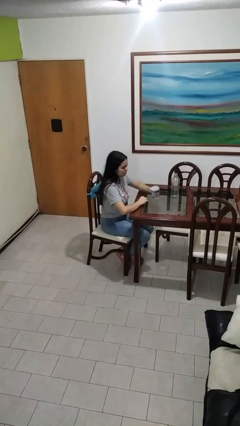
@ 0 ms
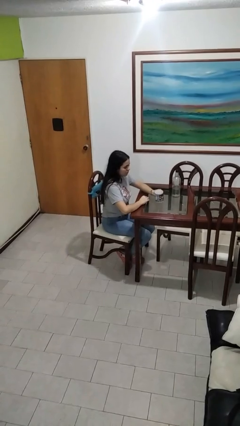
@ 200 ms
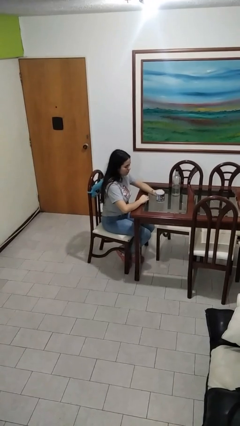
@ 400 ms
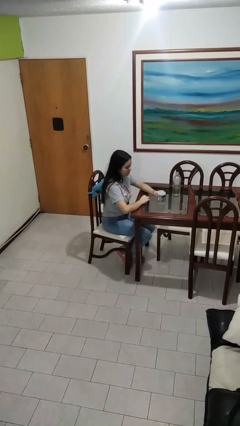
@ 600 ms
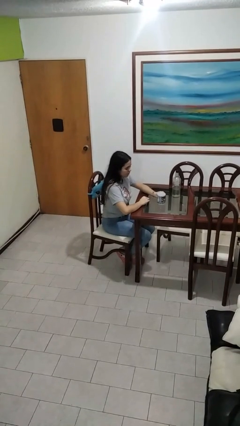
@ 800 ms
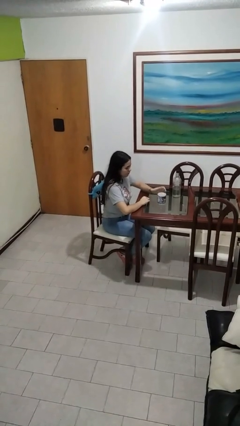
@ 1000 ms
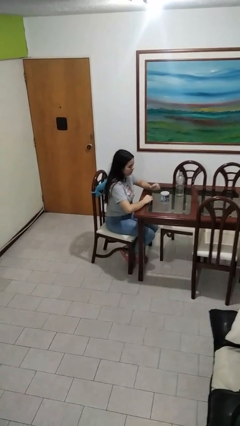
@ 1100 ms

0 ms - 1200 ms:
person puts down object on table

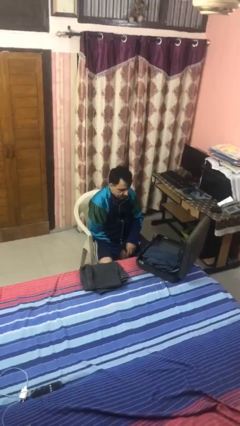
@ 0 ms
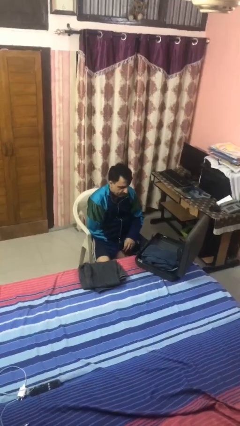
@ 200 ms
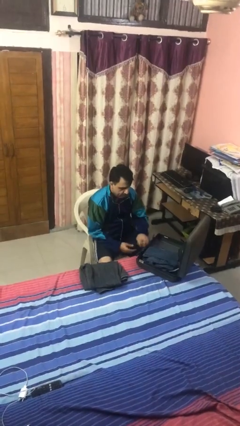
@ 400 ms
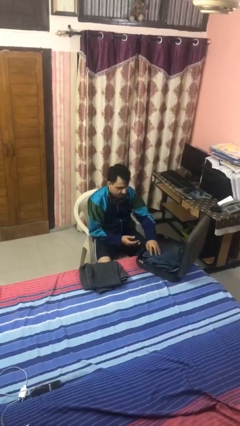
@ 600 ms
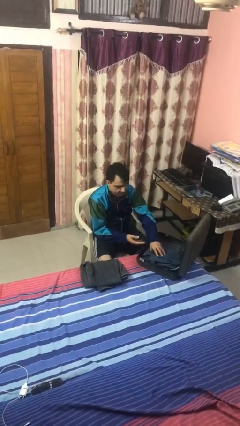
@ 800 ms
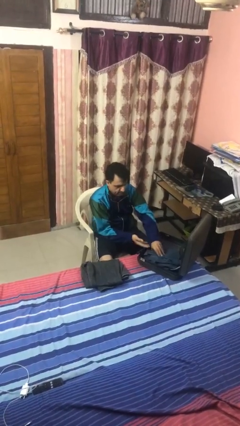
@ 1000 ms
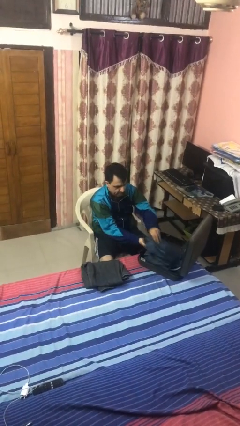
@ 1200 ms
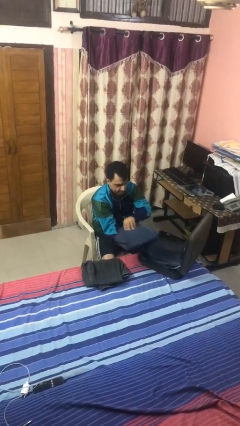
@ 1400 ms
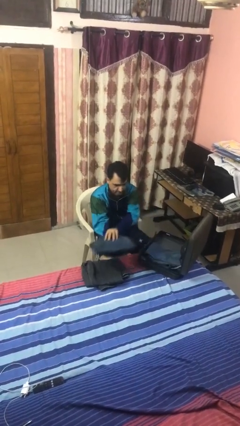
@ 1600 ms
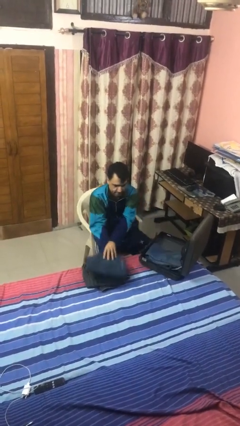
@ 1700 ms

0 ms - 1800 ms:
person unloads clothes from suitcase

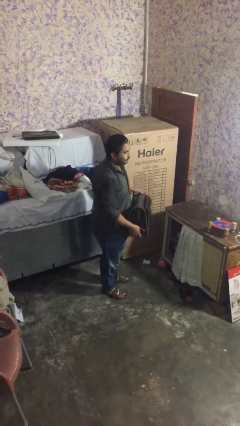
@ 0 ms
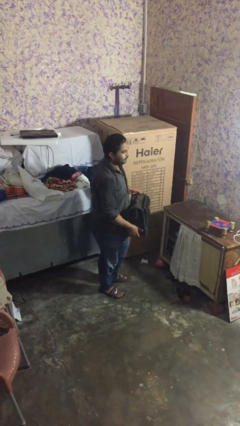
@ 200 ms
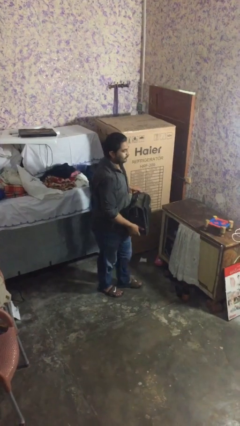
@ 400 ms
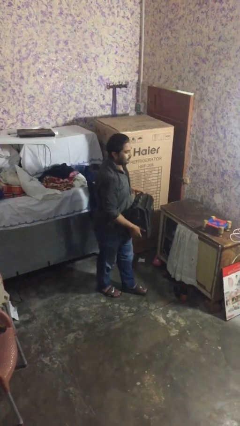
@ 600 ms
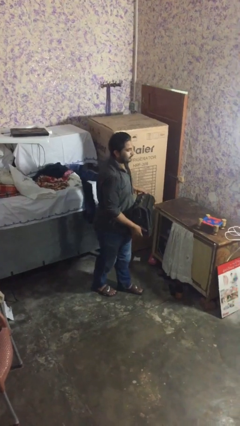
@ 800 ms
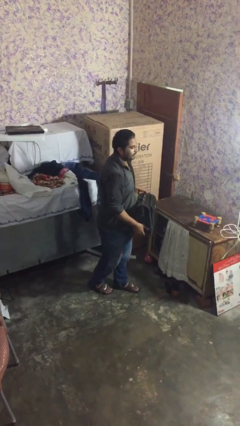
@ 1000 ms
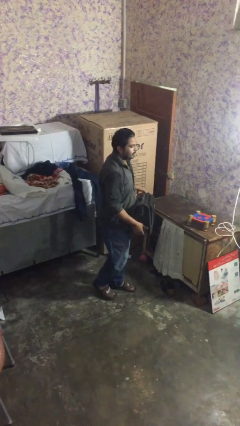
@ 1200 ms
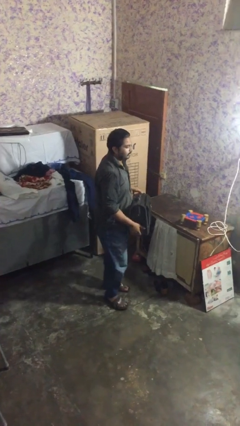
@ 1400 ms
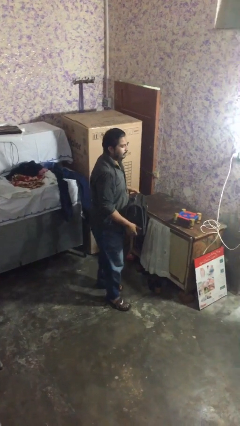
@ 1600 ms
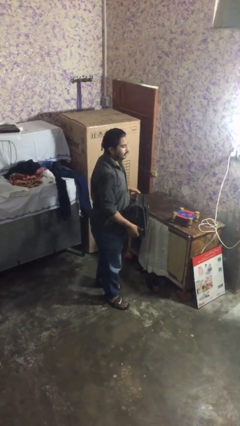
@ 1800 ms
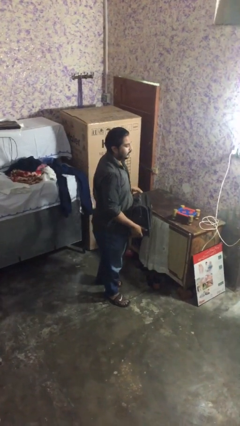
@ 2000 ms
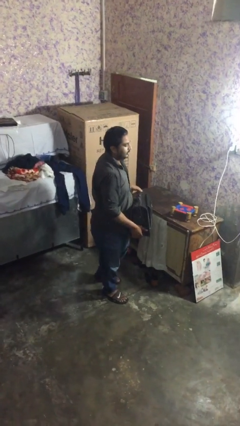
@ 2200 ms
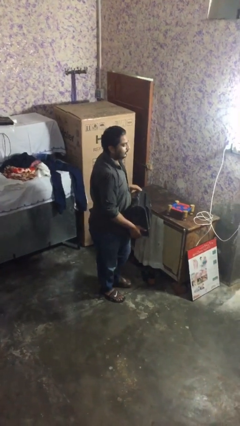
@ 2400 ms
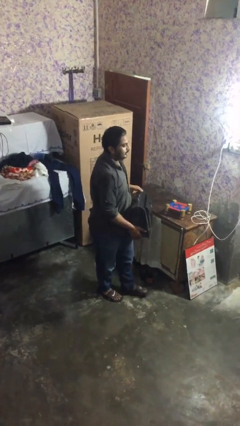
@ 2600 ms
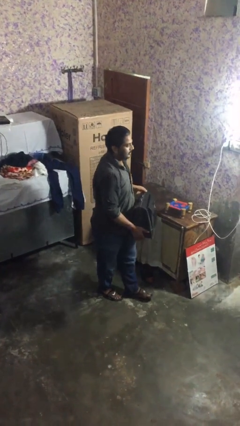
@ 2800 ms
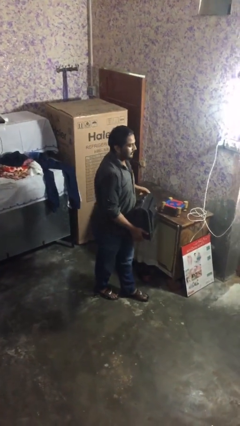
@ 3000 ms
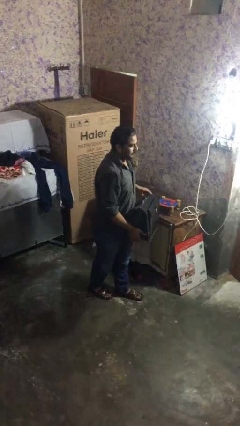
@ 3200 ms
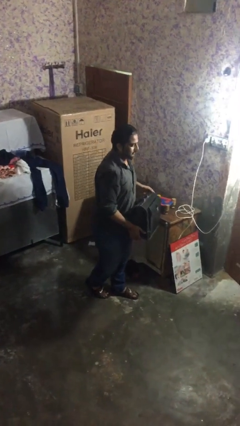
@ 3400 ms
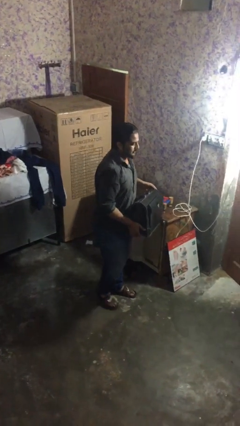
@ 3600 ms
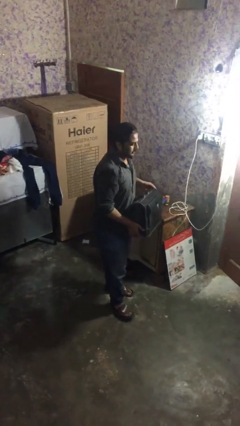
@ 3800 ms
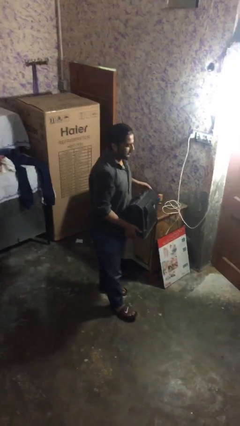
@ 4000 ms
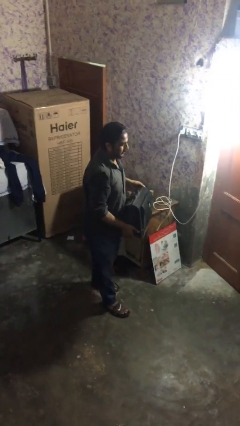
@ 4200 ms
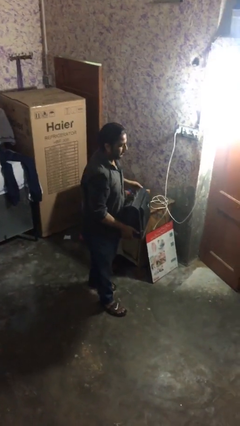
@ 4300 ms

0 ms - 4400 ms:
person carries heavy object

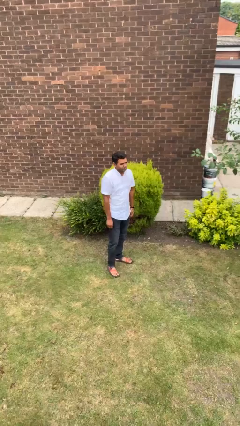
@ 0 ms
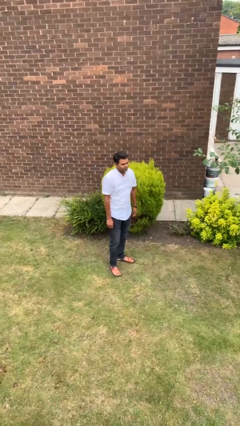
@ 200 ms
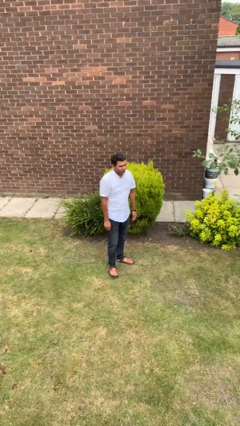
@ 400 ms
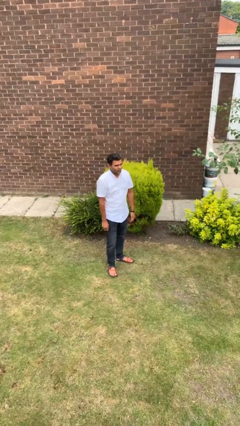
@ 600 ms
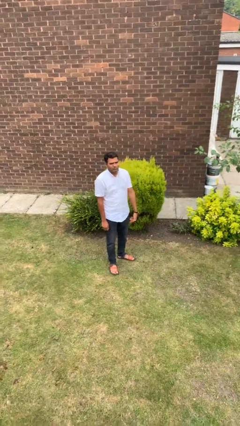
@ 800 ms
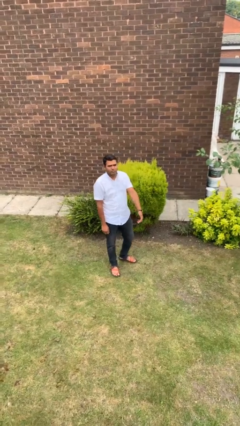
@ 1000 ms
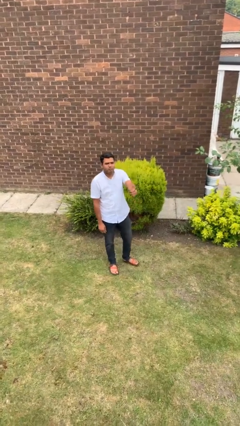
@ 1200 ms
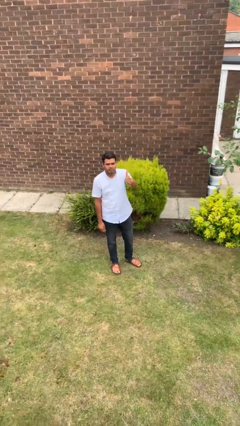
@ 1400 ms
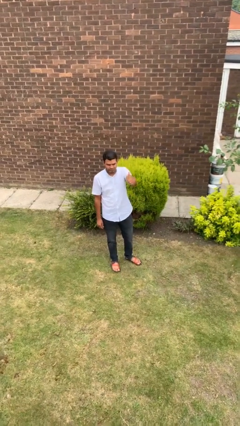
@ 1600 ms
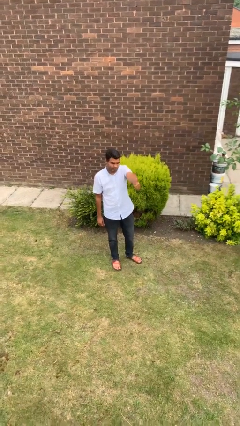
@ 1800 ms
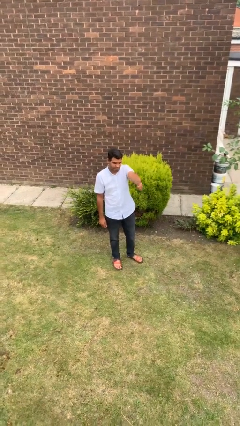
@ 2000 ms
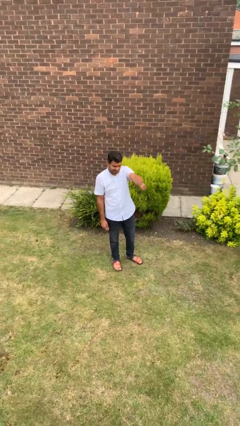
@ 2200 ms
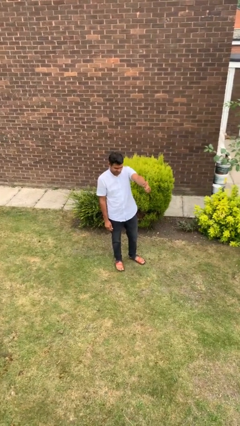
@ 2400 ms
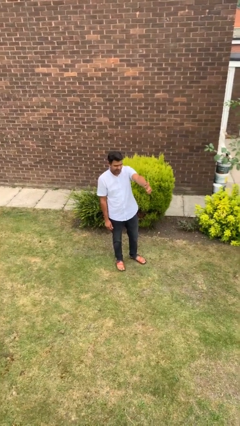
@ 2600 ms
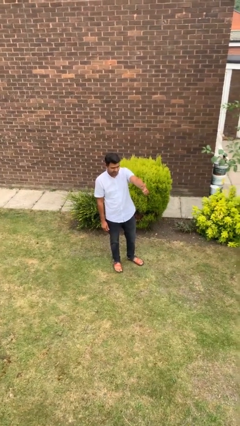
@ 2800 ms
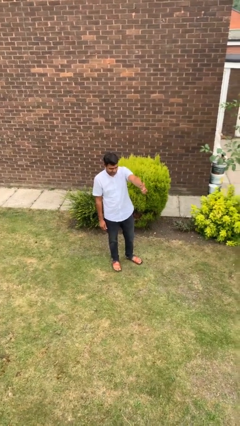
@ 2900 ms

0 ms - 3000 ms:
person gestures thumbs up

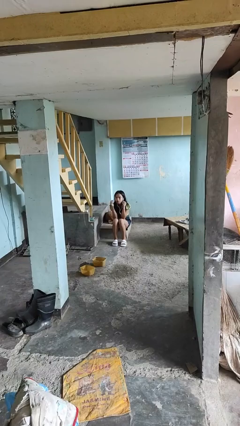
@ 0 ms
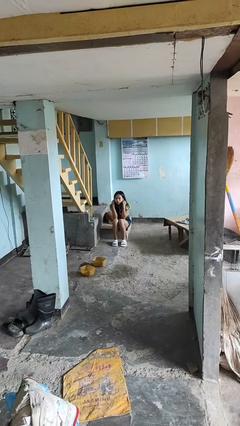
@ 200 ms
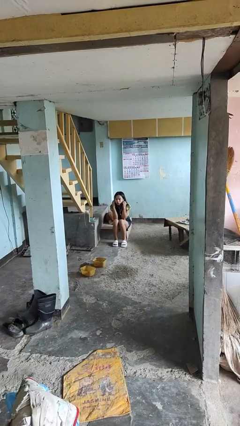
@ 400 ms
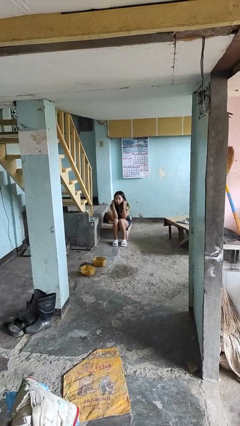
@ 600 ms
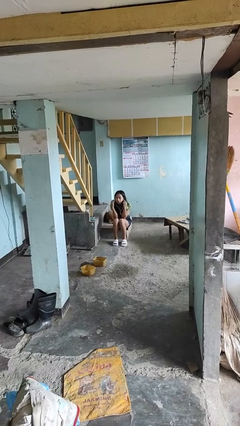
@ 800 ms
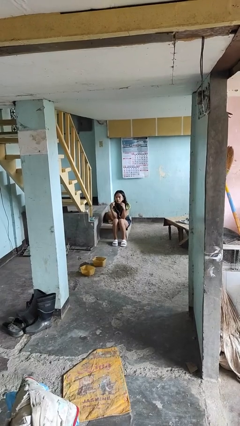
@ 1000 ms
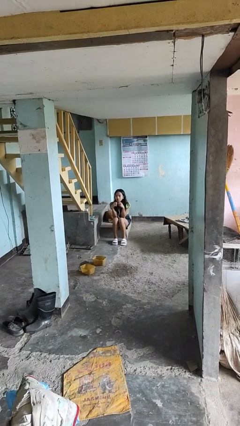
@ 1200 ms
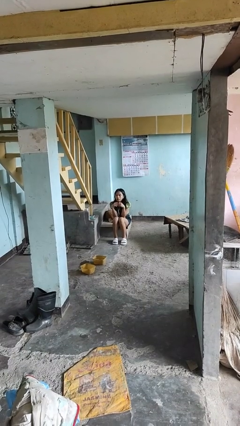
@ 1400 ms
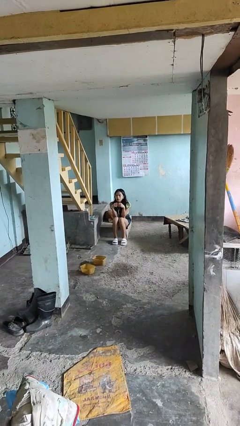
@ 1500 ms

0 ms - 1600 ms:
person takes off headphones

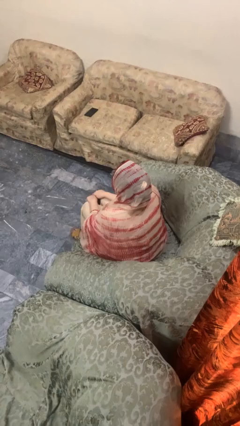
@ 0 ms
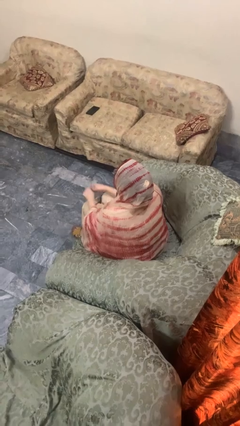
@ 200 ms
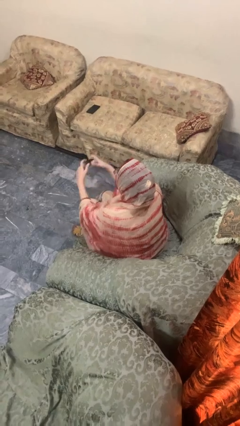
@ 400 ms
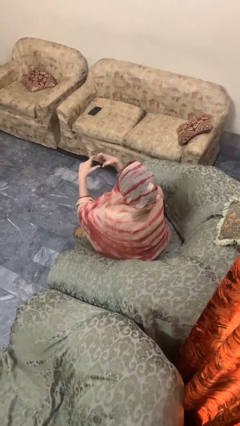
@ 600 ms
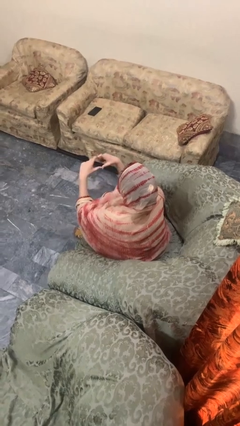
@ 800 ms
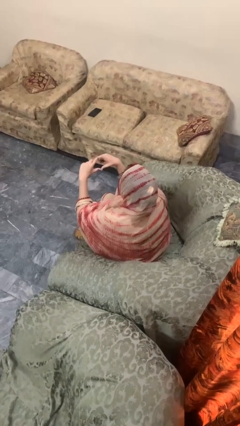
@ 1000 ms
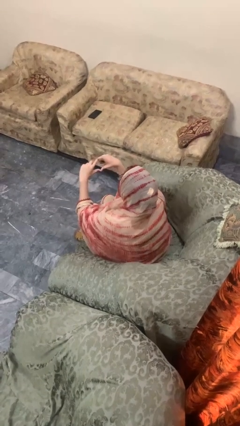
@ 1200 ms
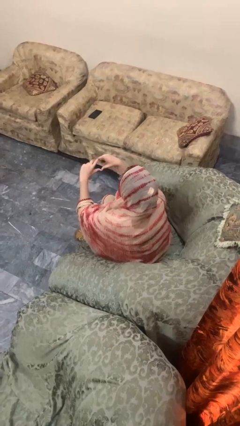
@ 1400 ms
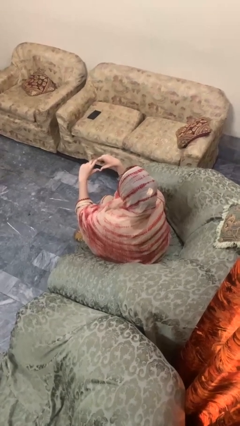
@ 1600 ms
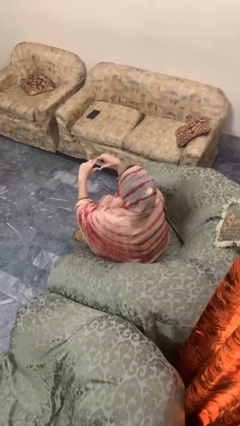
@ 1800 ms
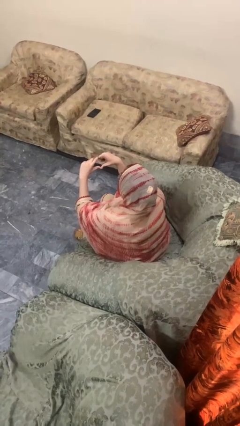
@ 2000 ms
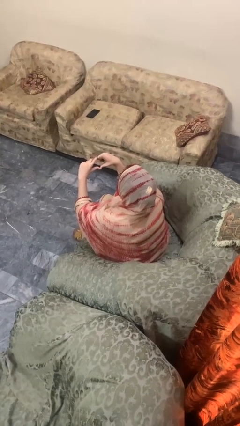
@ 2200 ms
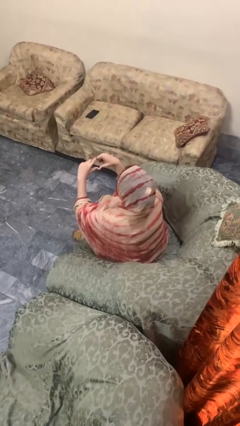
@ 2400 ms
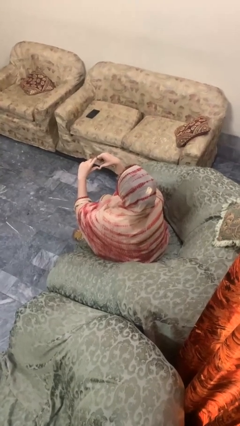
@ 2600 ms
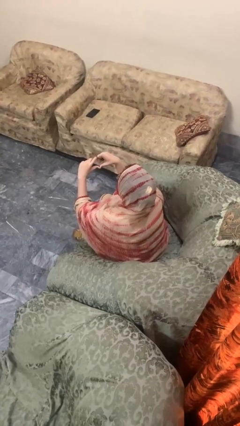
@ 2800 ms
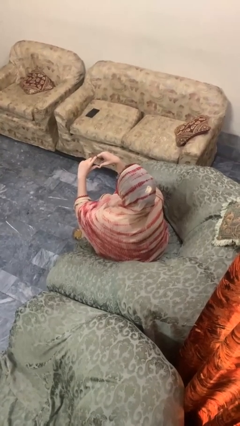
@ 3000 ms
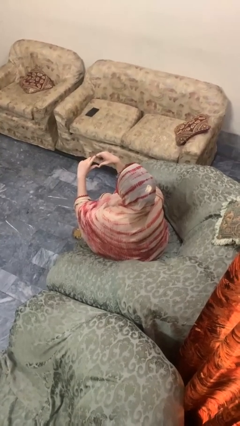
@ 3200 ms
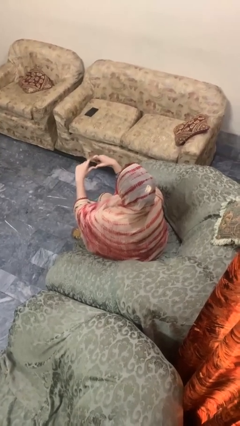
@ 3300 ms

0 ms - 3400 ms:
person gestures heart

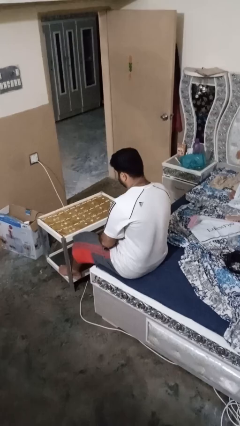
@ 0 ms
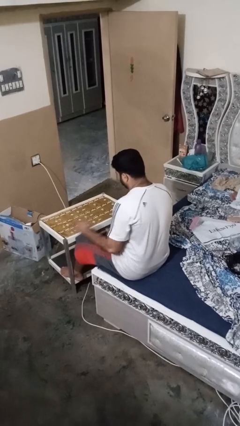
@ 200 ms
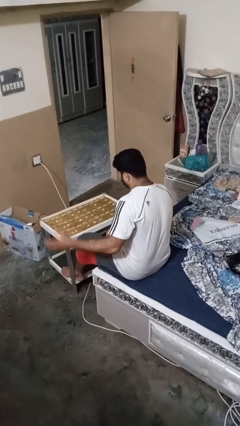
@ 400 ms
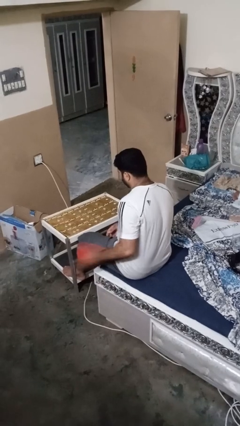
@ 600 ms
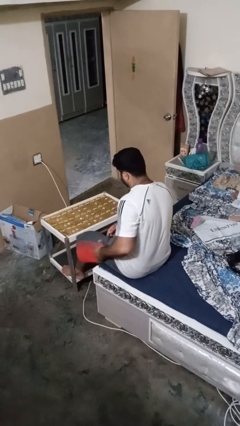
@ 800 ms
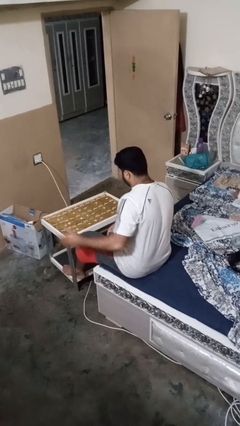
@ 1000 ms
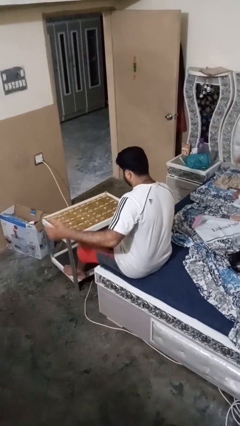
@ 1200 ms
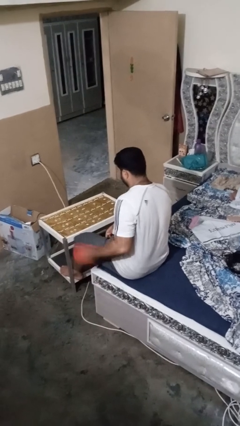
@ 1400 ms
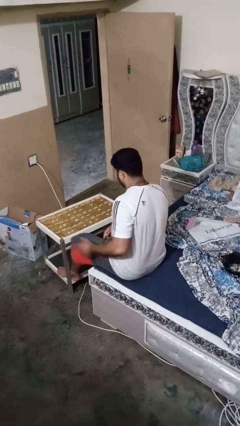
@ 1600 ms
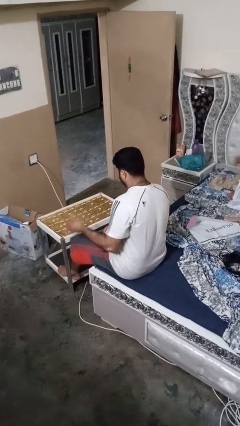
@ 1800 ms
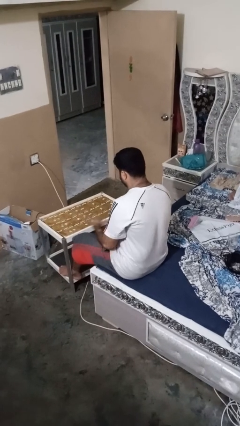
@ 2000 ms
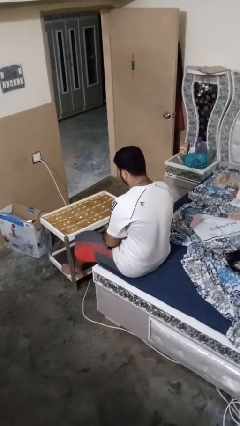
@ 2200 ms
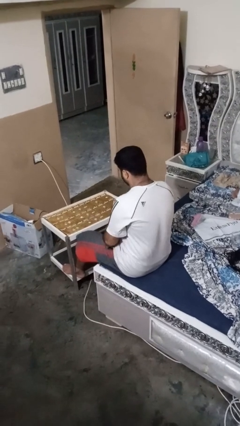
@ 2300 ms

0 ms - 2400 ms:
person slaps hands on thighs
